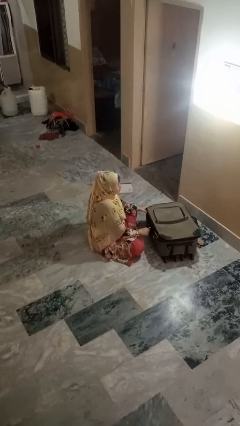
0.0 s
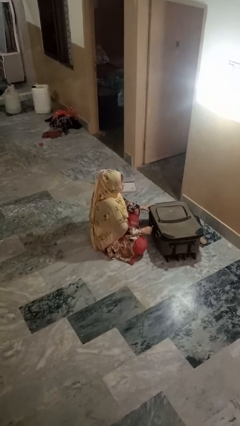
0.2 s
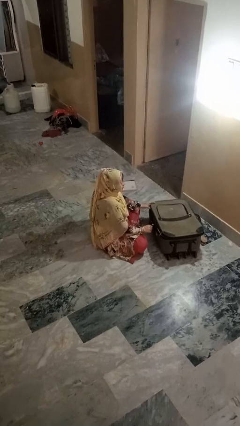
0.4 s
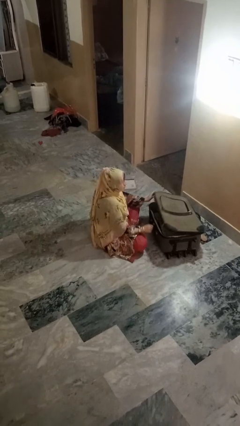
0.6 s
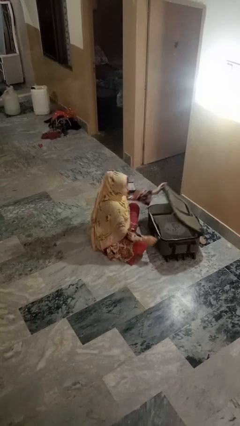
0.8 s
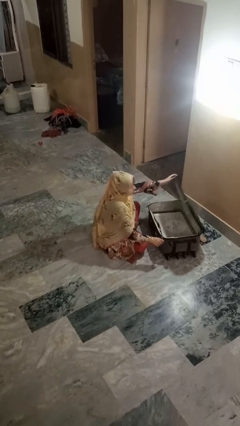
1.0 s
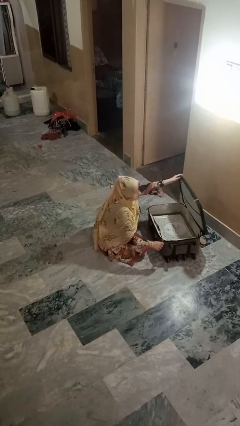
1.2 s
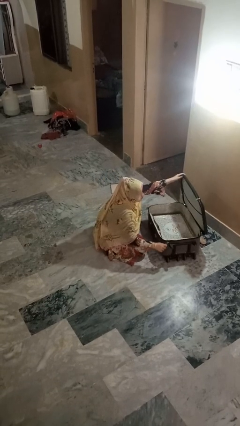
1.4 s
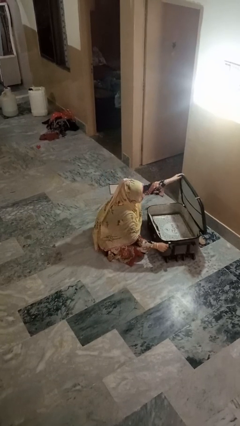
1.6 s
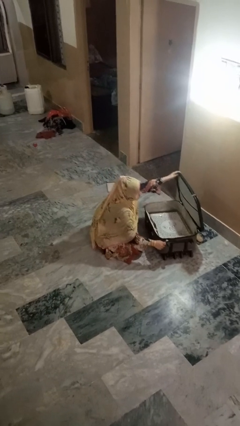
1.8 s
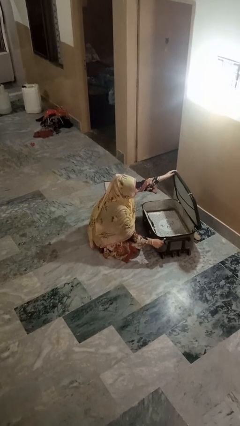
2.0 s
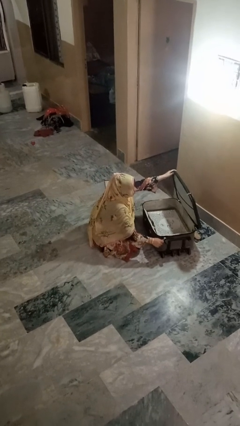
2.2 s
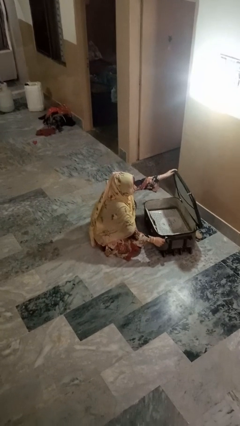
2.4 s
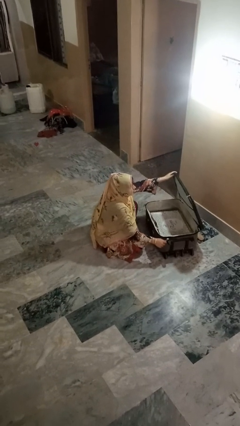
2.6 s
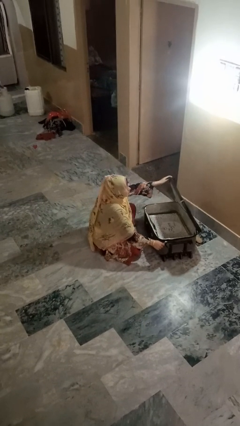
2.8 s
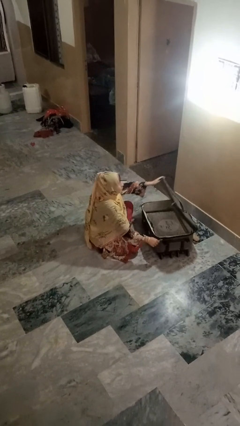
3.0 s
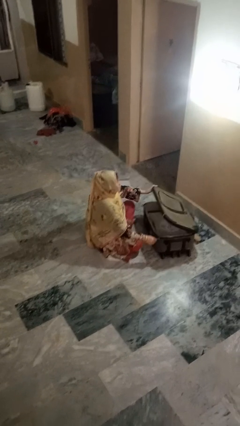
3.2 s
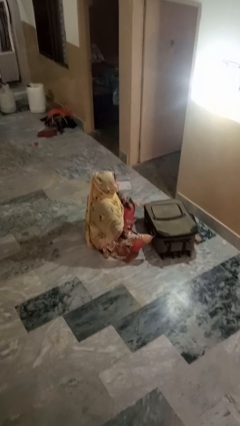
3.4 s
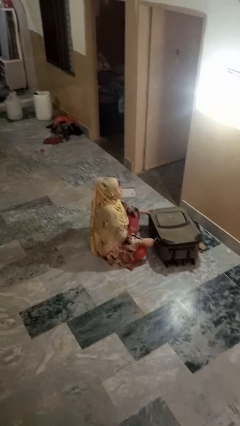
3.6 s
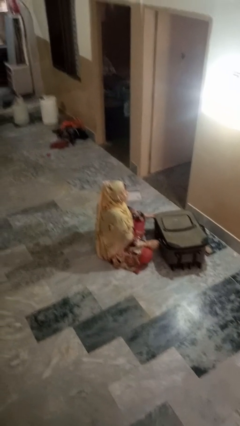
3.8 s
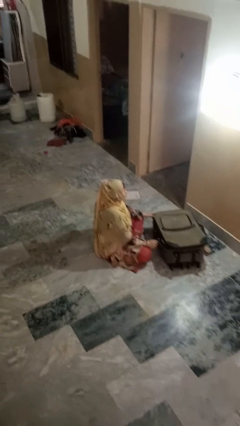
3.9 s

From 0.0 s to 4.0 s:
person opens suitcase

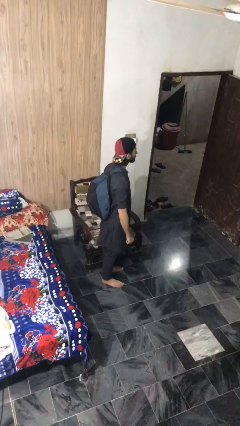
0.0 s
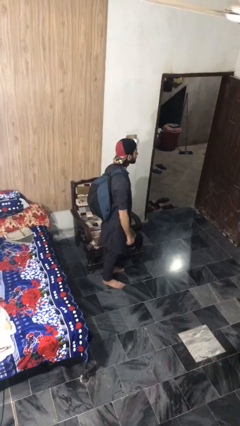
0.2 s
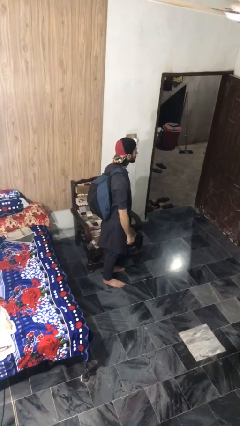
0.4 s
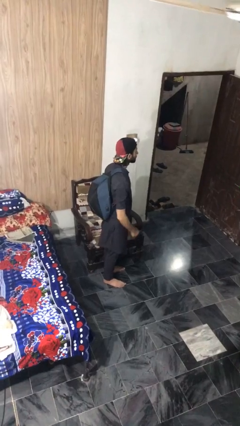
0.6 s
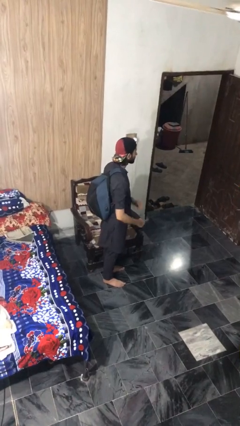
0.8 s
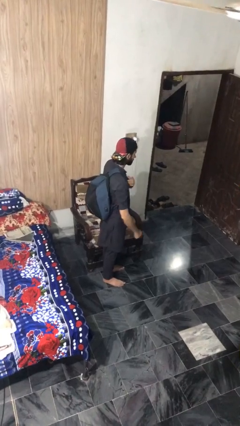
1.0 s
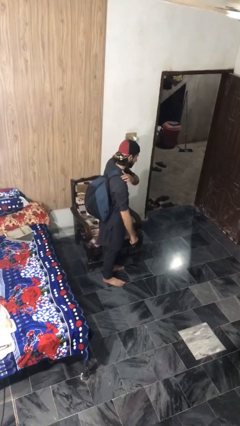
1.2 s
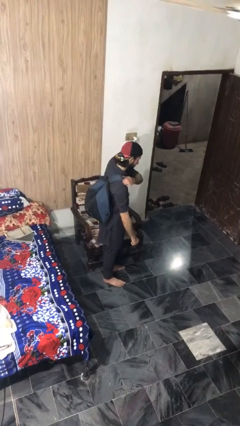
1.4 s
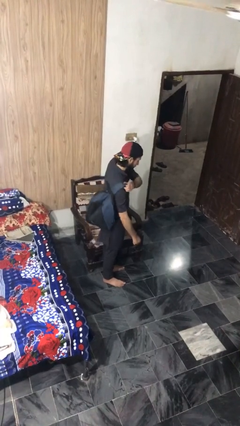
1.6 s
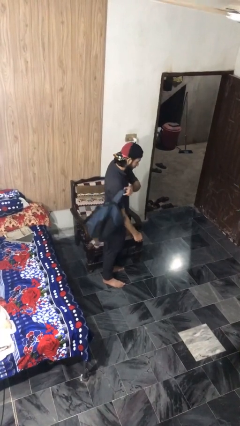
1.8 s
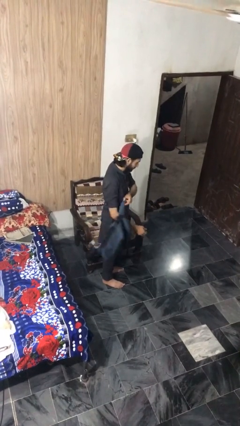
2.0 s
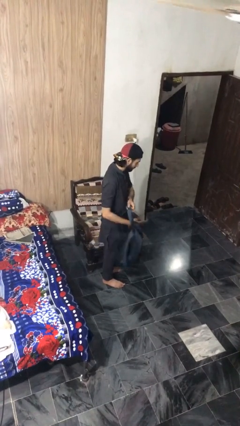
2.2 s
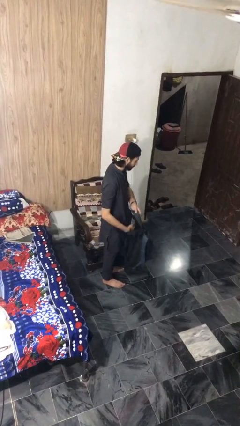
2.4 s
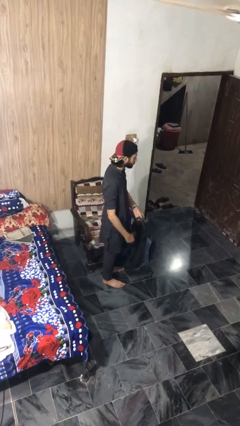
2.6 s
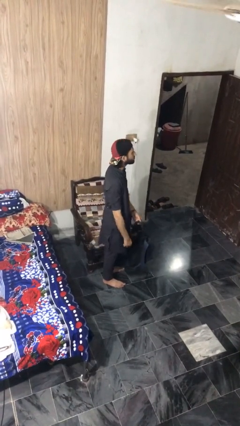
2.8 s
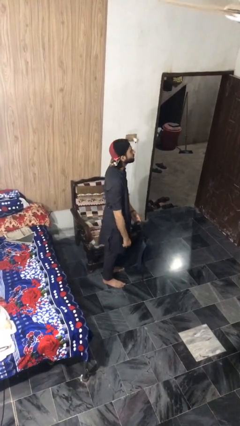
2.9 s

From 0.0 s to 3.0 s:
person takes off backpack

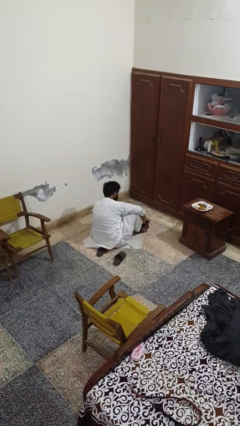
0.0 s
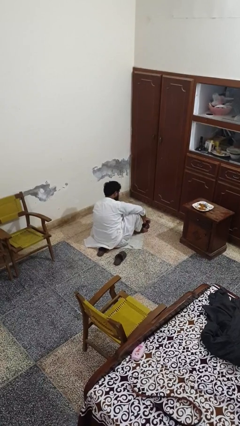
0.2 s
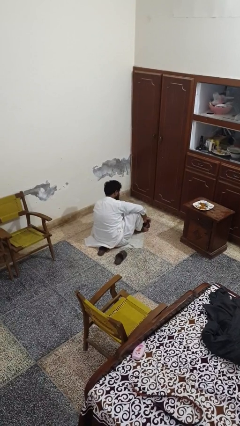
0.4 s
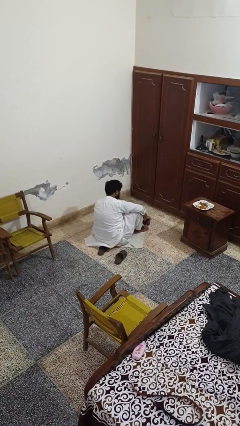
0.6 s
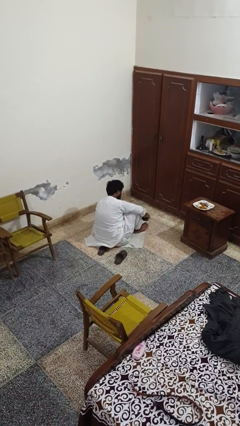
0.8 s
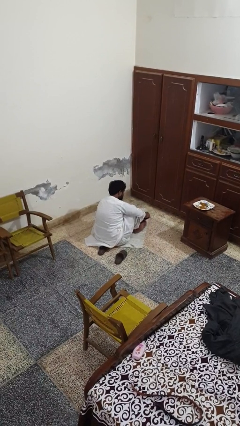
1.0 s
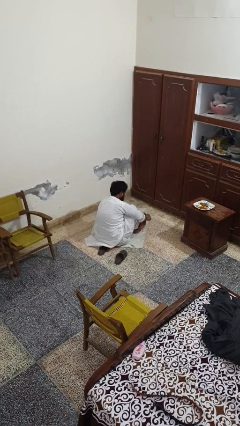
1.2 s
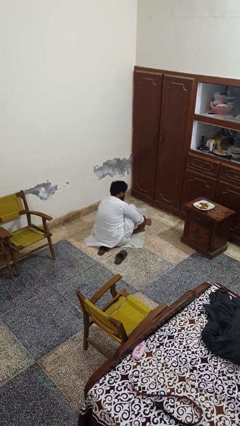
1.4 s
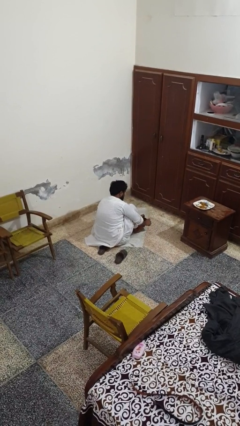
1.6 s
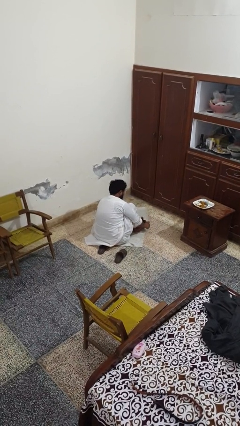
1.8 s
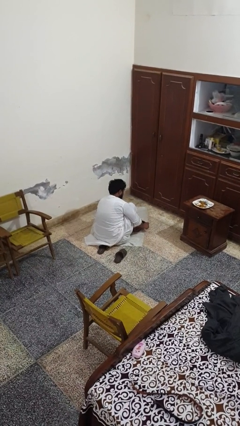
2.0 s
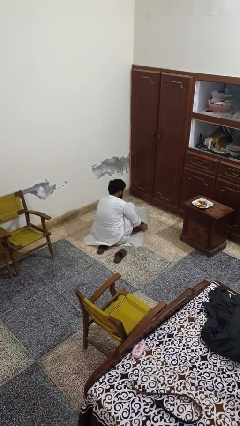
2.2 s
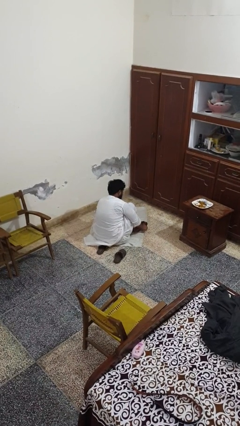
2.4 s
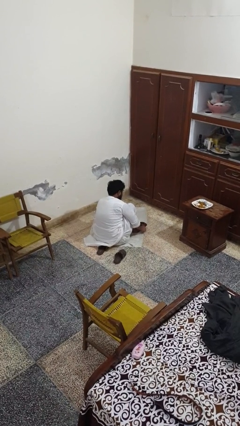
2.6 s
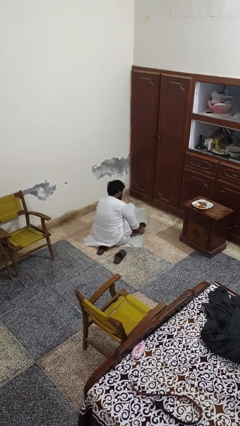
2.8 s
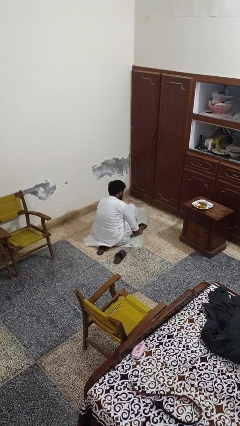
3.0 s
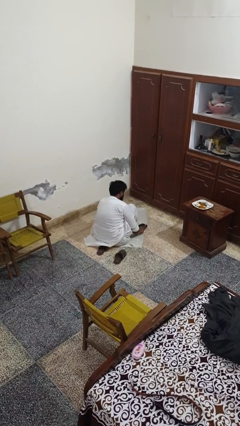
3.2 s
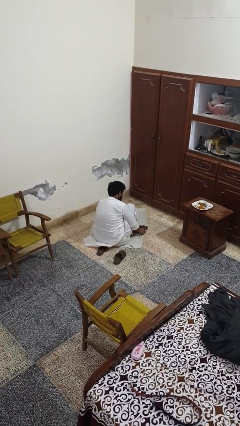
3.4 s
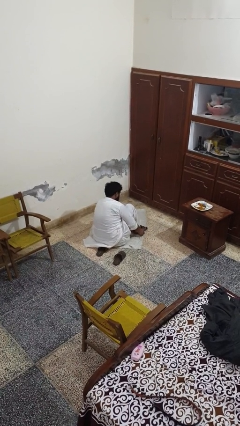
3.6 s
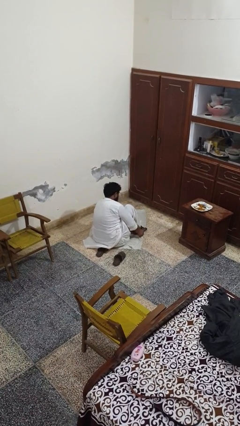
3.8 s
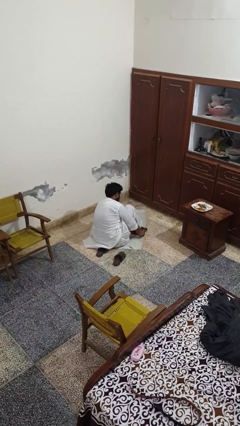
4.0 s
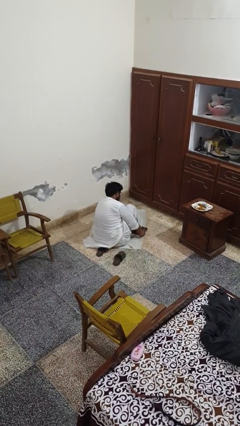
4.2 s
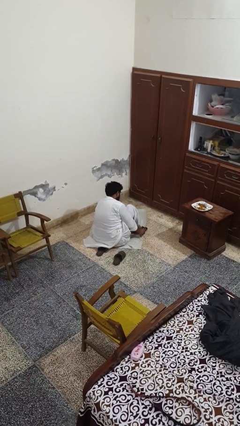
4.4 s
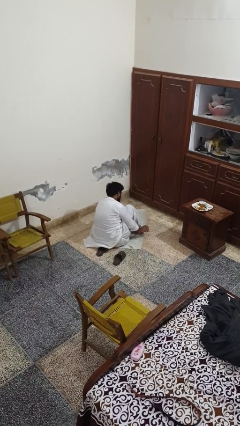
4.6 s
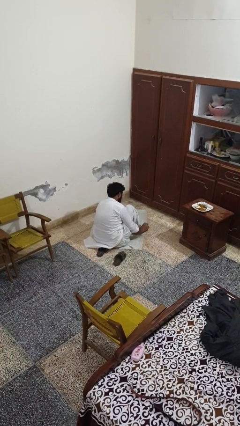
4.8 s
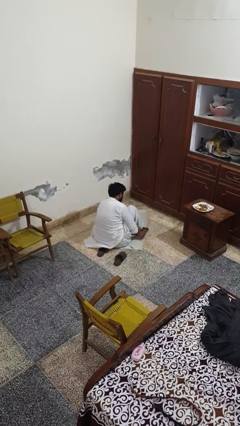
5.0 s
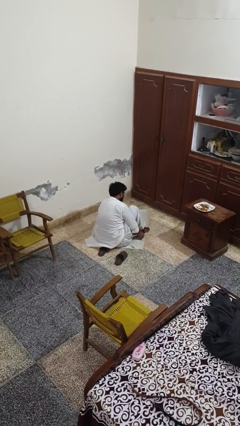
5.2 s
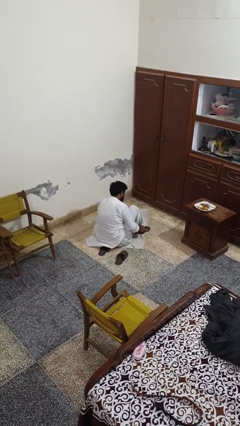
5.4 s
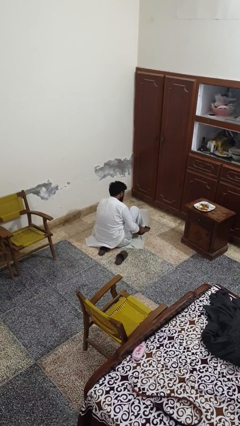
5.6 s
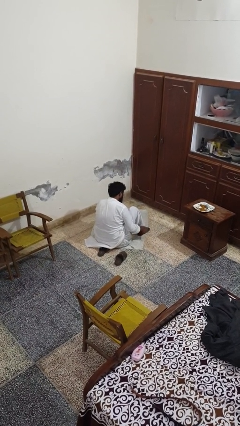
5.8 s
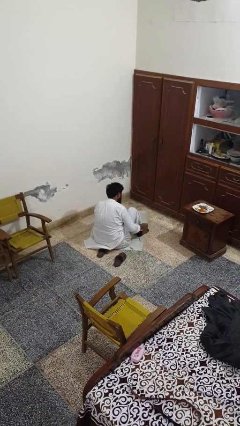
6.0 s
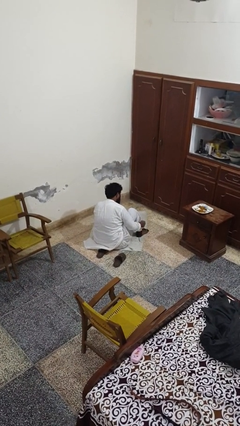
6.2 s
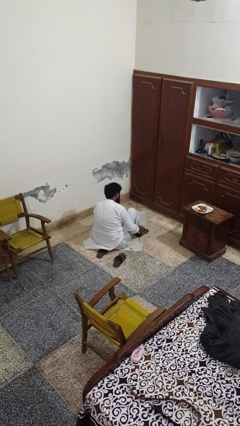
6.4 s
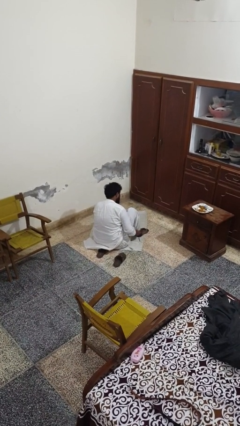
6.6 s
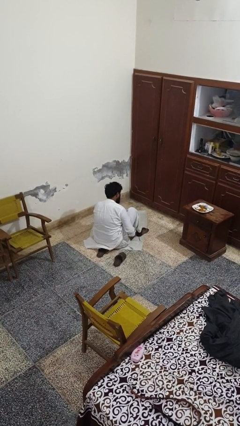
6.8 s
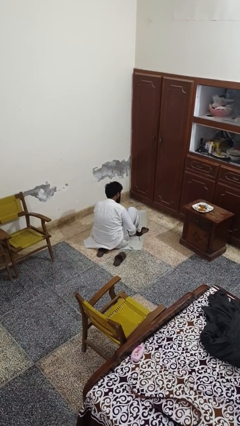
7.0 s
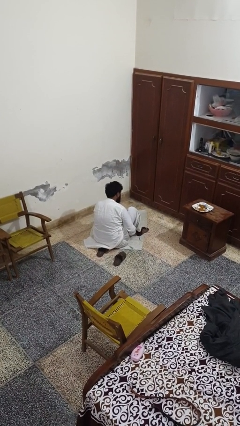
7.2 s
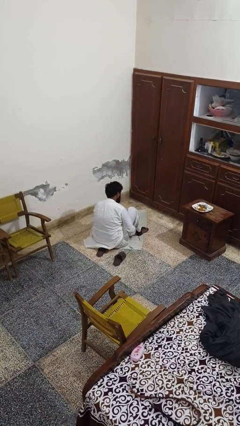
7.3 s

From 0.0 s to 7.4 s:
person puts on socks

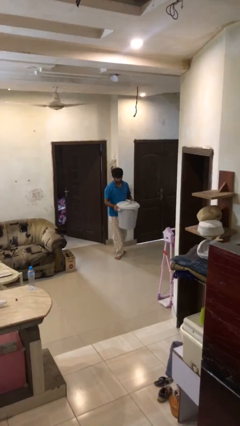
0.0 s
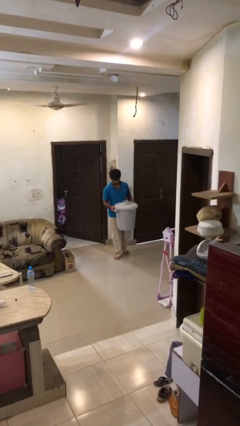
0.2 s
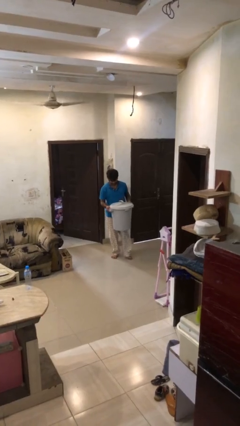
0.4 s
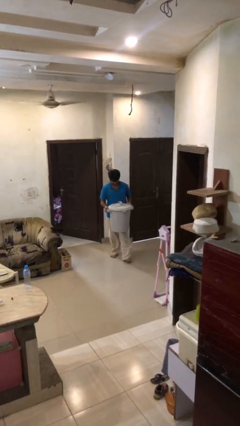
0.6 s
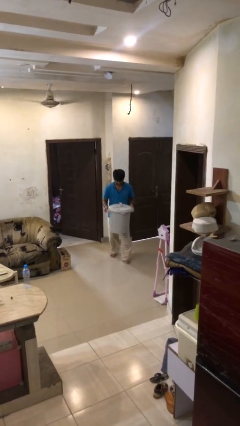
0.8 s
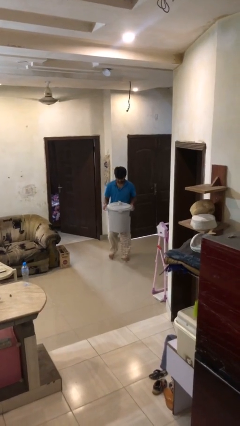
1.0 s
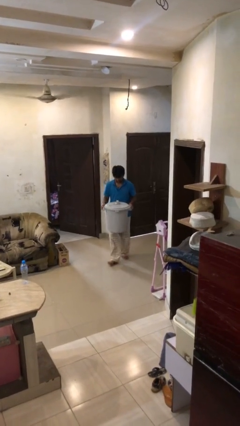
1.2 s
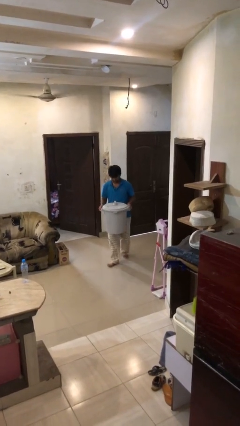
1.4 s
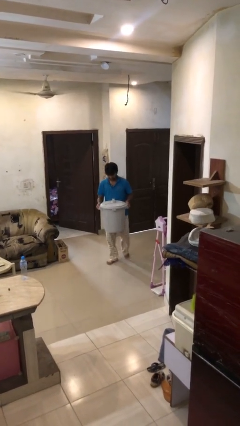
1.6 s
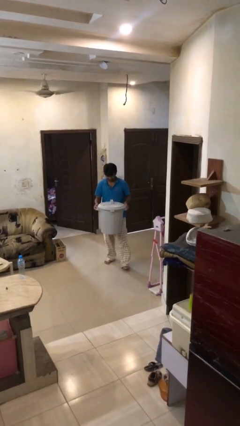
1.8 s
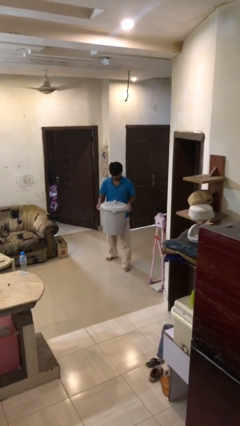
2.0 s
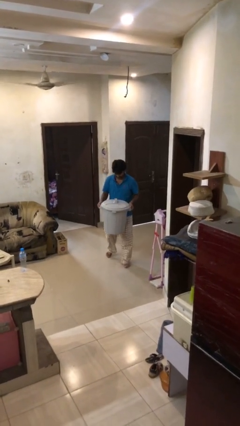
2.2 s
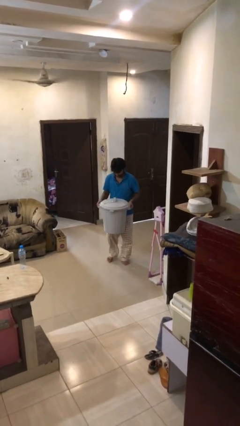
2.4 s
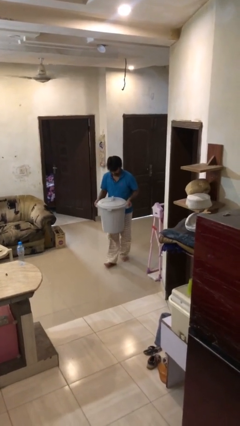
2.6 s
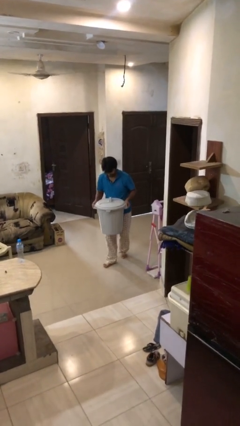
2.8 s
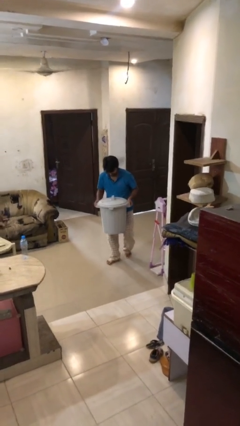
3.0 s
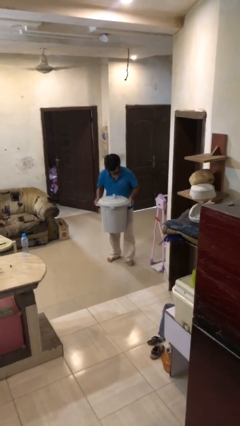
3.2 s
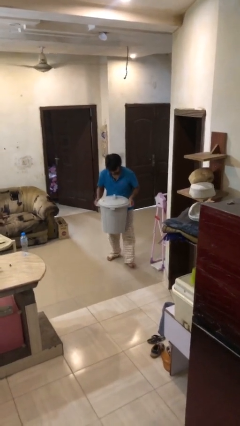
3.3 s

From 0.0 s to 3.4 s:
person carries heavy object
